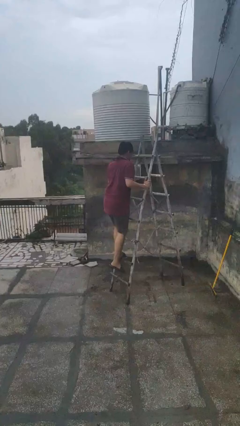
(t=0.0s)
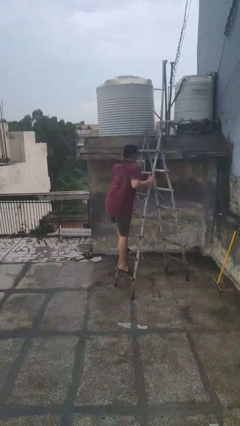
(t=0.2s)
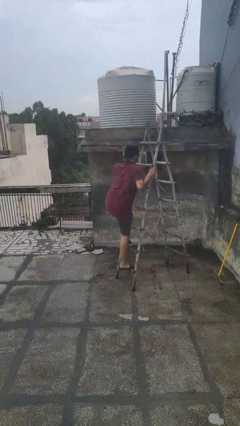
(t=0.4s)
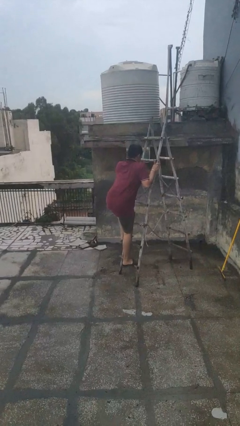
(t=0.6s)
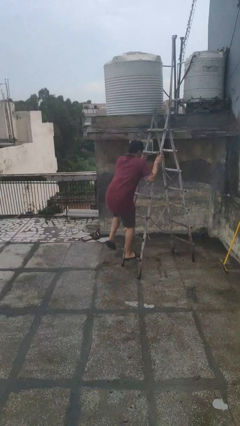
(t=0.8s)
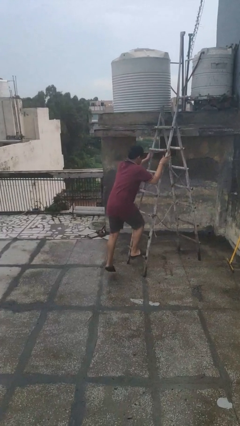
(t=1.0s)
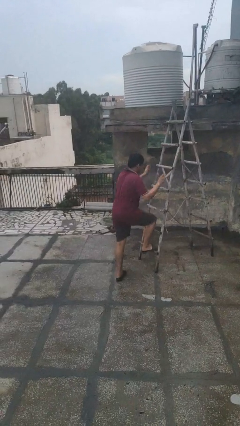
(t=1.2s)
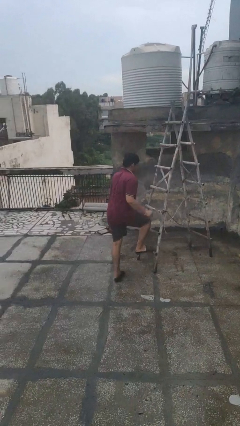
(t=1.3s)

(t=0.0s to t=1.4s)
person climbs down ladder

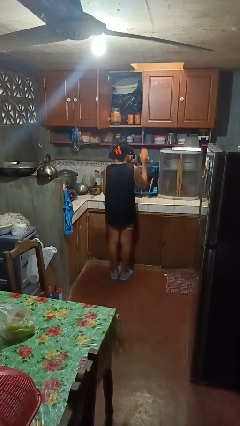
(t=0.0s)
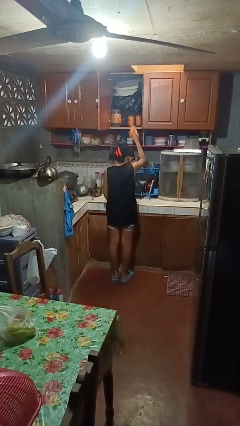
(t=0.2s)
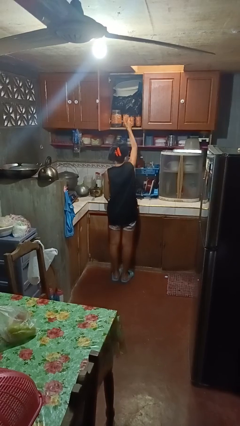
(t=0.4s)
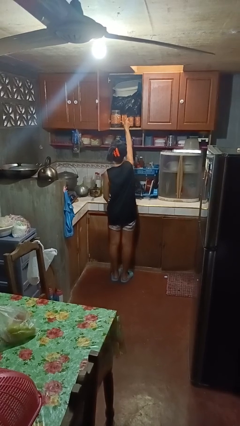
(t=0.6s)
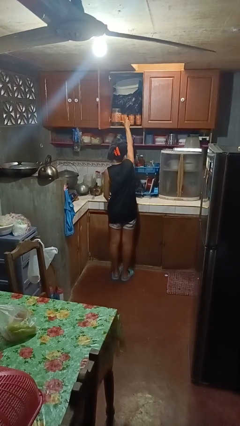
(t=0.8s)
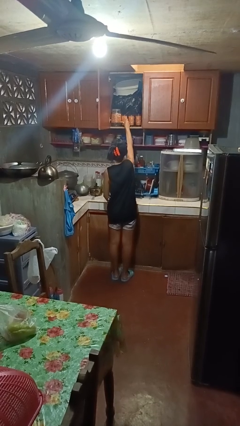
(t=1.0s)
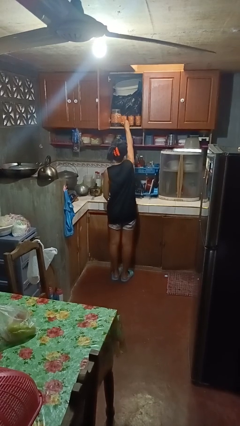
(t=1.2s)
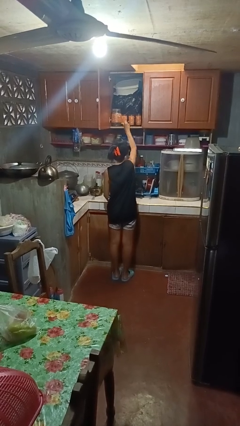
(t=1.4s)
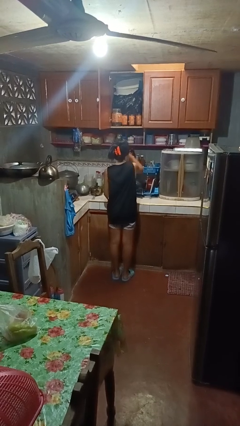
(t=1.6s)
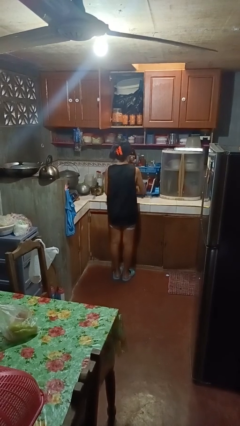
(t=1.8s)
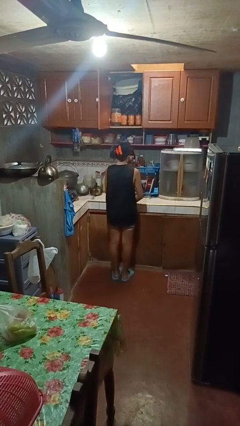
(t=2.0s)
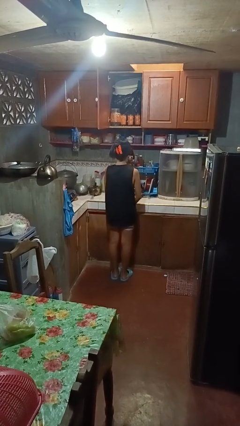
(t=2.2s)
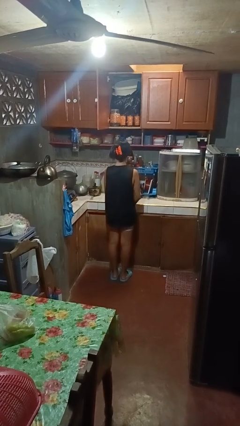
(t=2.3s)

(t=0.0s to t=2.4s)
person puts object in cabinet

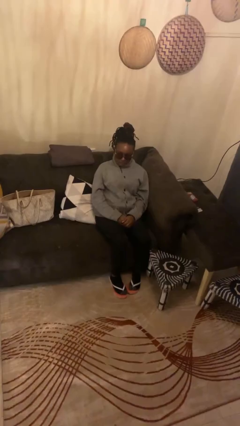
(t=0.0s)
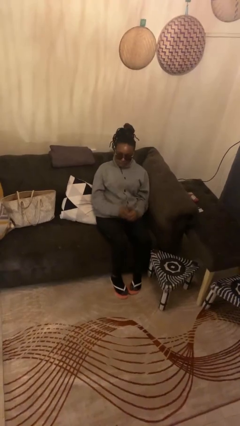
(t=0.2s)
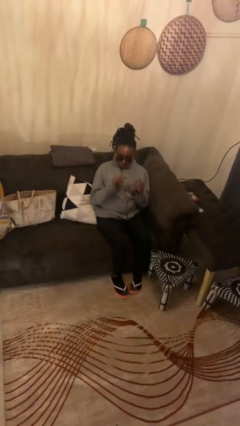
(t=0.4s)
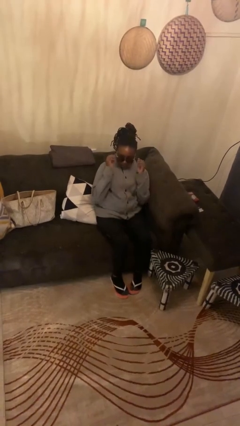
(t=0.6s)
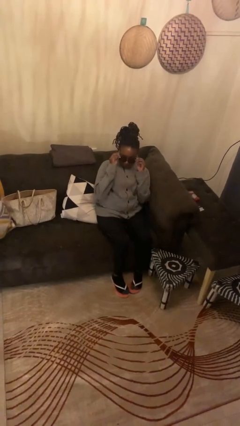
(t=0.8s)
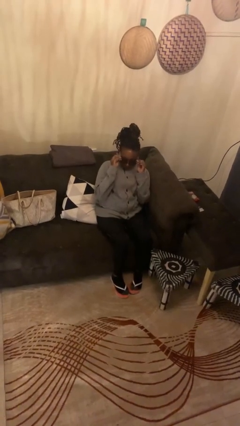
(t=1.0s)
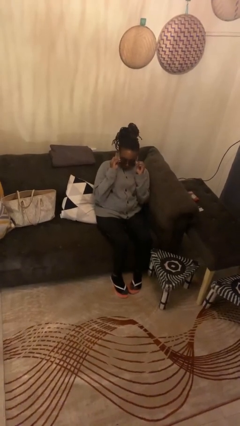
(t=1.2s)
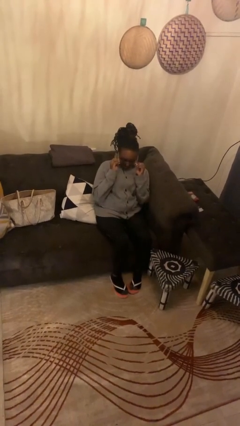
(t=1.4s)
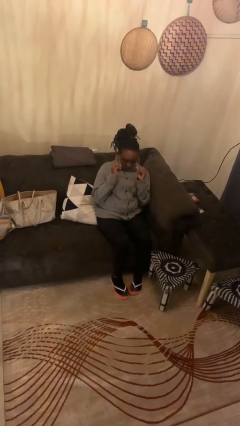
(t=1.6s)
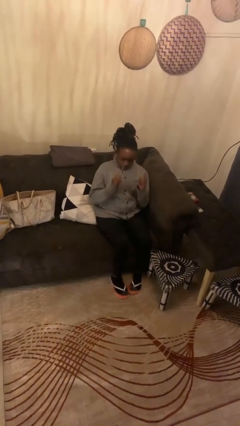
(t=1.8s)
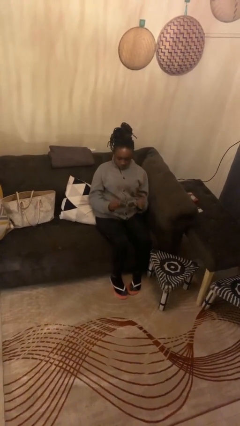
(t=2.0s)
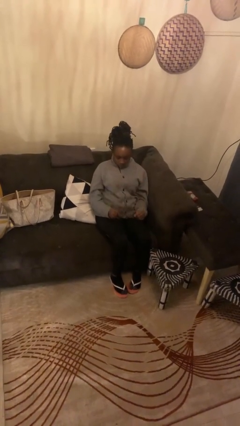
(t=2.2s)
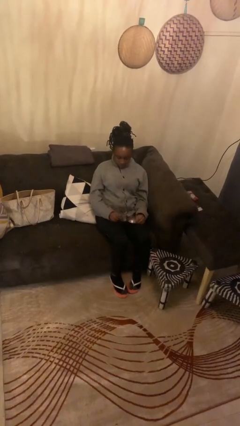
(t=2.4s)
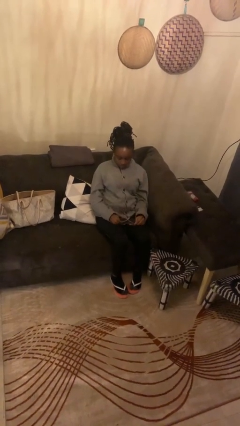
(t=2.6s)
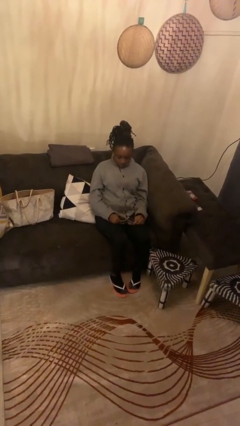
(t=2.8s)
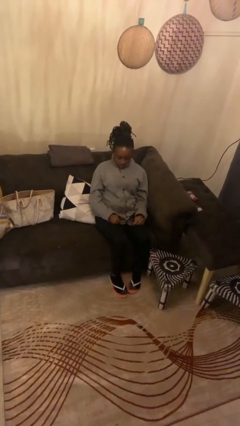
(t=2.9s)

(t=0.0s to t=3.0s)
person takes off sunglasses

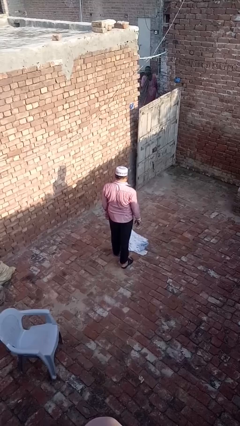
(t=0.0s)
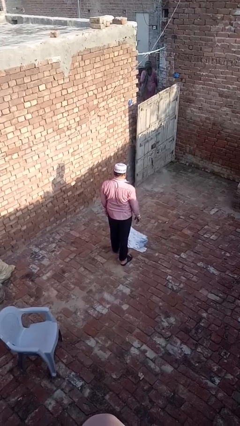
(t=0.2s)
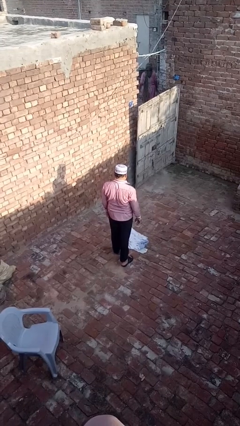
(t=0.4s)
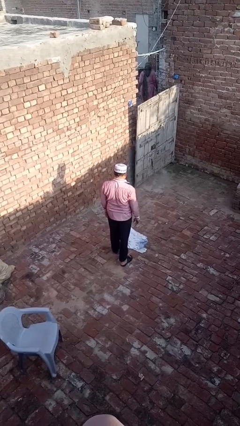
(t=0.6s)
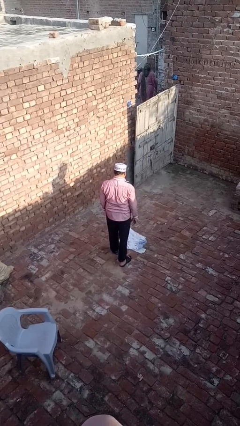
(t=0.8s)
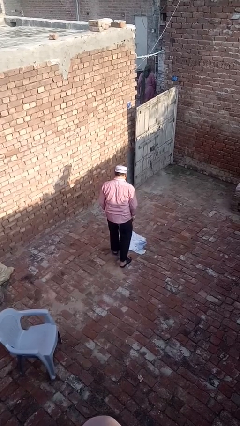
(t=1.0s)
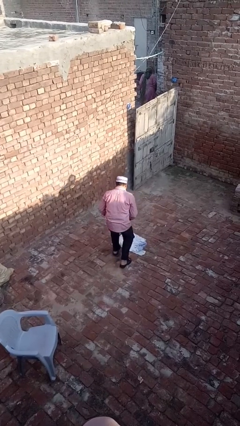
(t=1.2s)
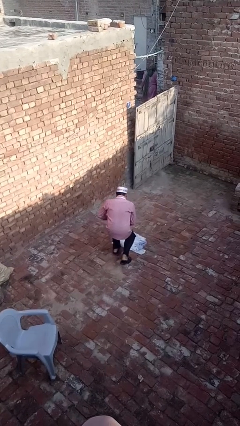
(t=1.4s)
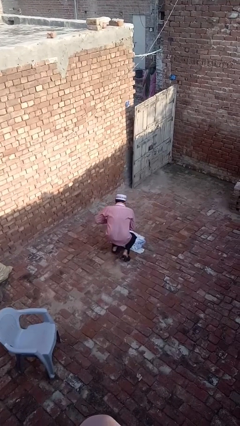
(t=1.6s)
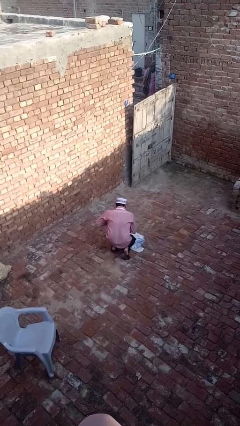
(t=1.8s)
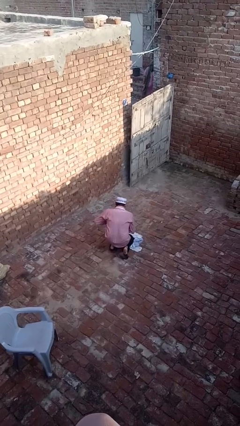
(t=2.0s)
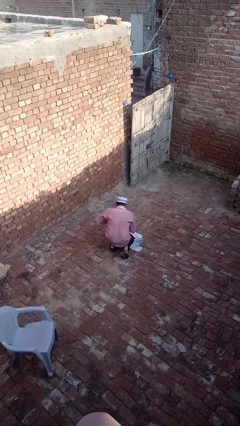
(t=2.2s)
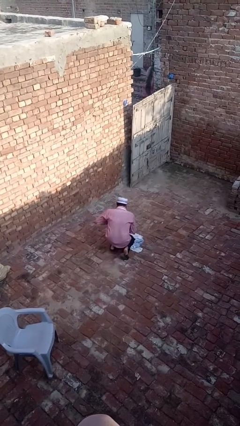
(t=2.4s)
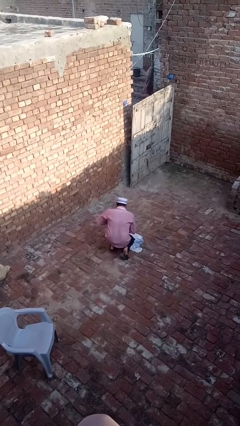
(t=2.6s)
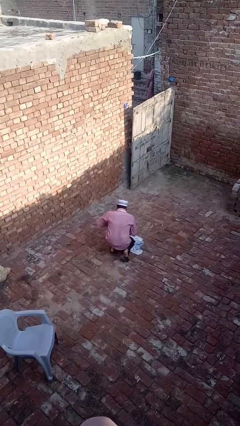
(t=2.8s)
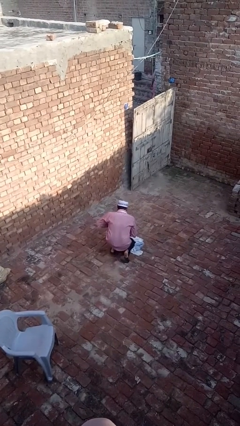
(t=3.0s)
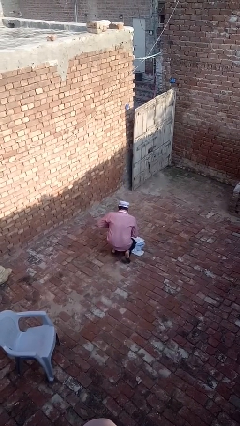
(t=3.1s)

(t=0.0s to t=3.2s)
person kneels

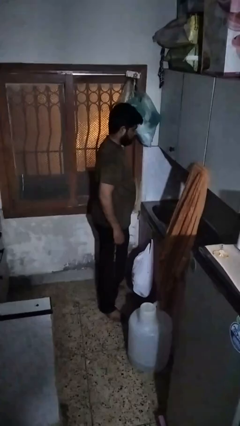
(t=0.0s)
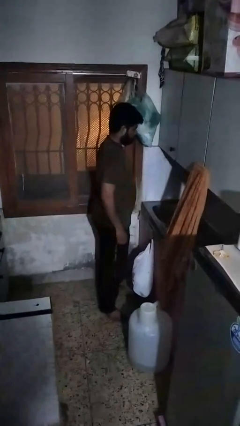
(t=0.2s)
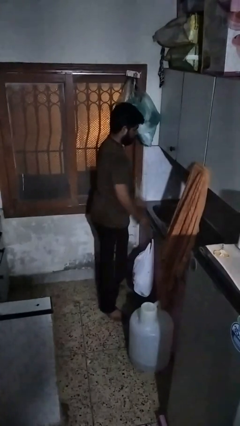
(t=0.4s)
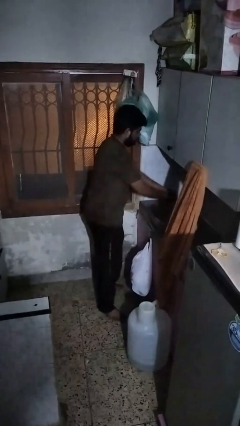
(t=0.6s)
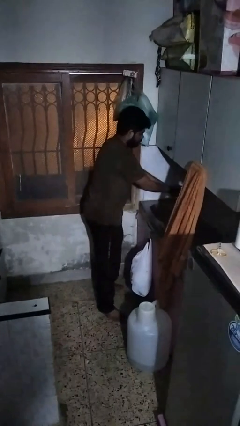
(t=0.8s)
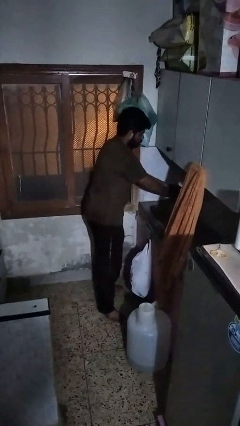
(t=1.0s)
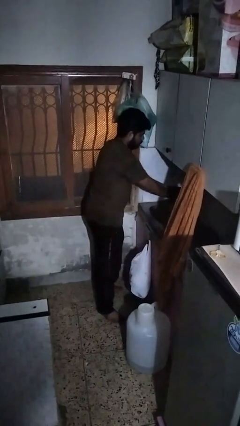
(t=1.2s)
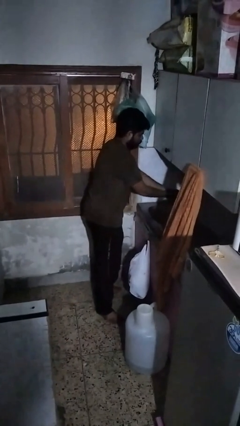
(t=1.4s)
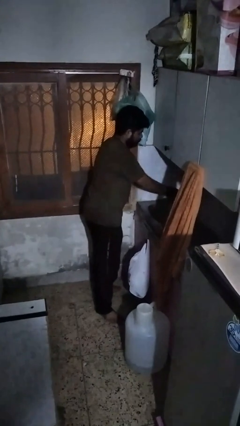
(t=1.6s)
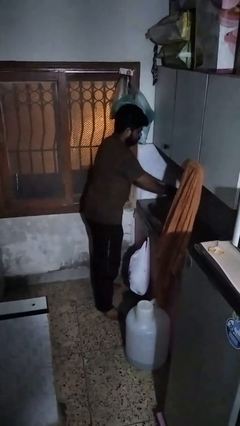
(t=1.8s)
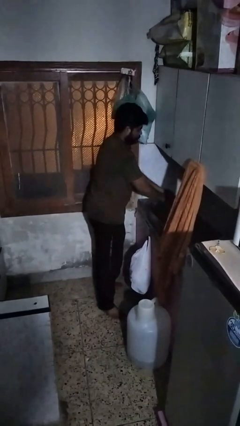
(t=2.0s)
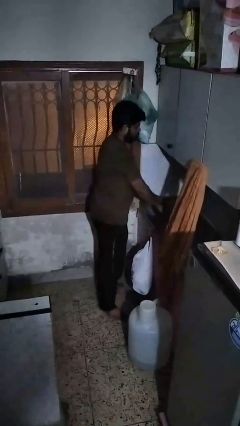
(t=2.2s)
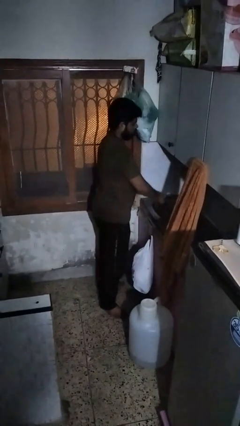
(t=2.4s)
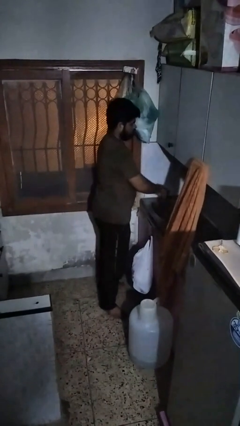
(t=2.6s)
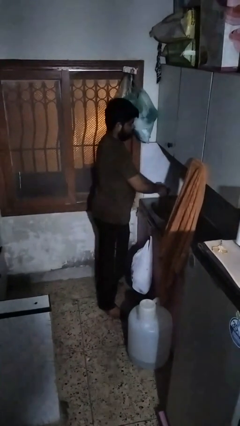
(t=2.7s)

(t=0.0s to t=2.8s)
person washes hands

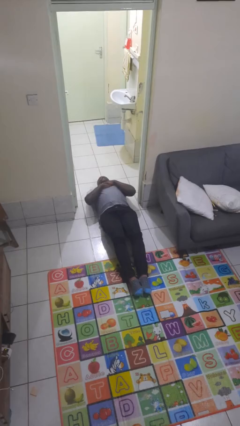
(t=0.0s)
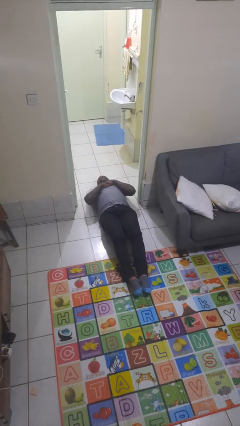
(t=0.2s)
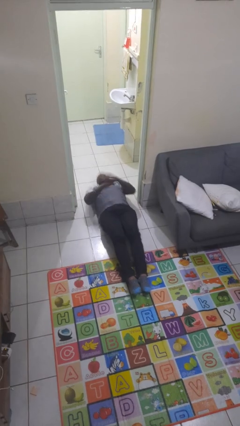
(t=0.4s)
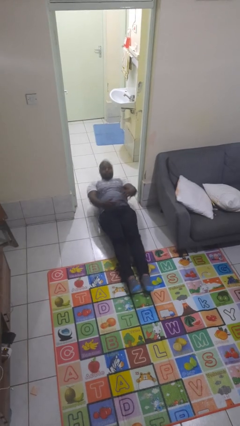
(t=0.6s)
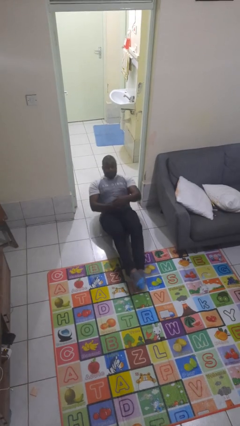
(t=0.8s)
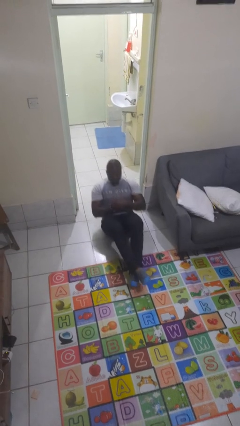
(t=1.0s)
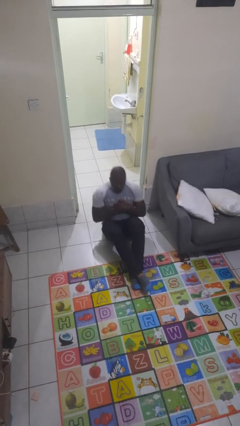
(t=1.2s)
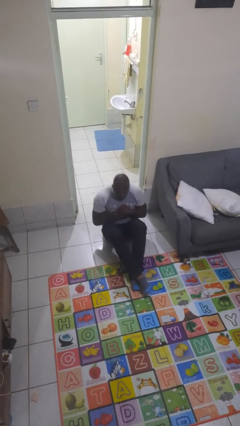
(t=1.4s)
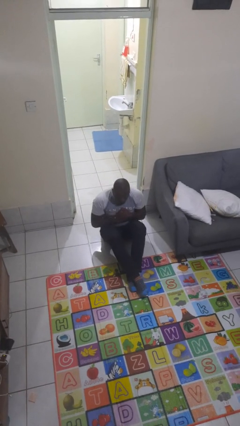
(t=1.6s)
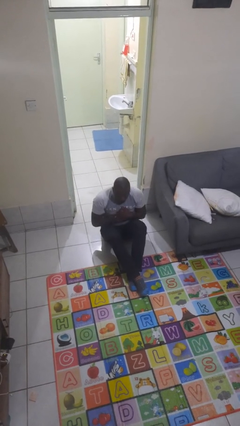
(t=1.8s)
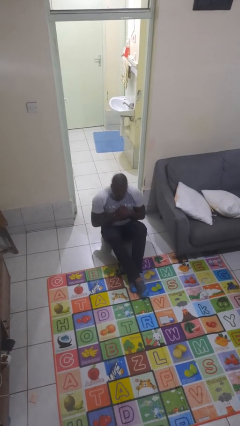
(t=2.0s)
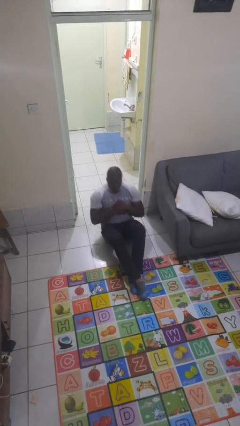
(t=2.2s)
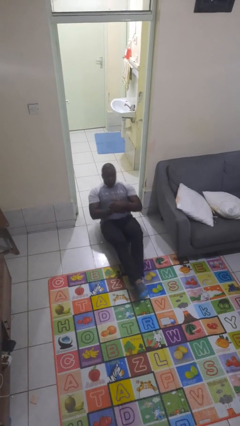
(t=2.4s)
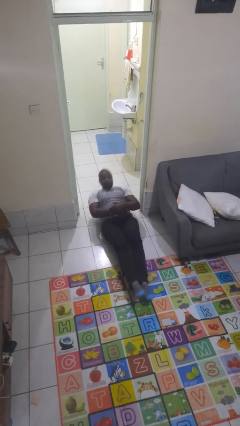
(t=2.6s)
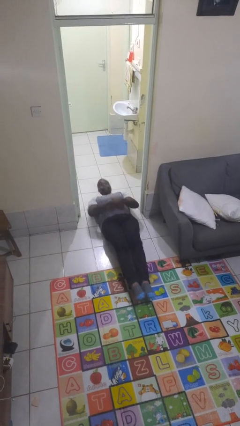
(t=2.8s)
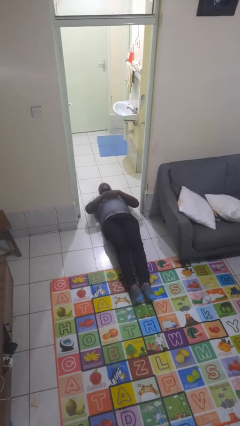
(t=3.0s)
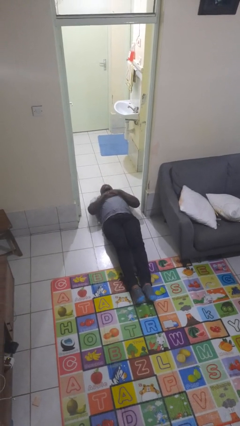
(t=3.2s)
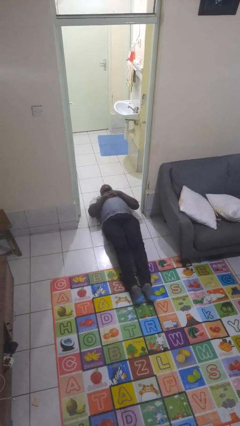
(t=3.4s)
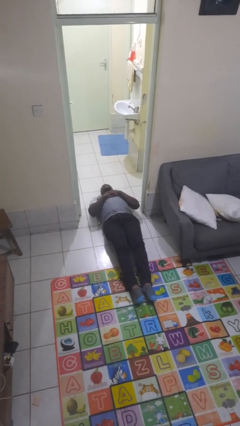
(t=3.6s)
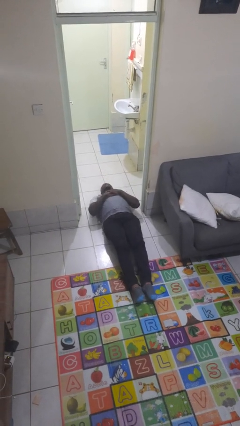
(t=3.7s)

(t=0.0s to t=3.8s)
person exercises with situp

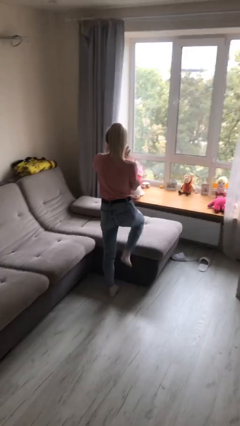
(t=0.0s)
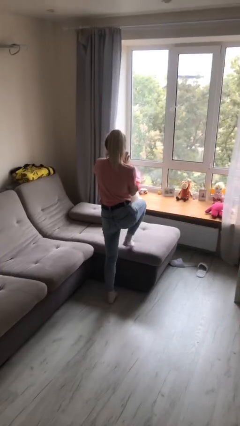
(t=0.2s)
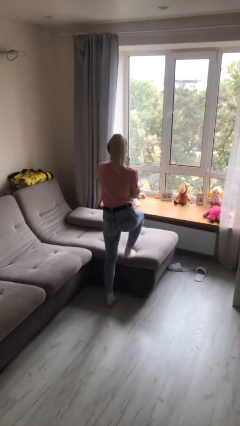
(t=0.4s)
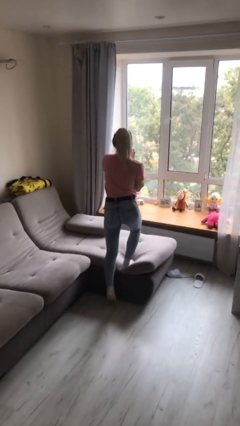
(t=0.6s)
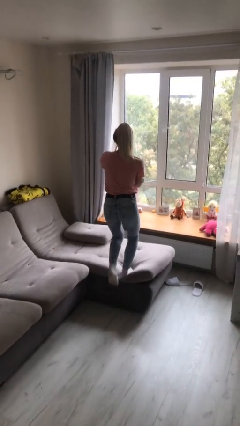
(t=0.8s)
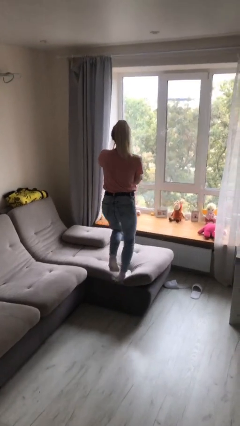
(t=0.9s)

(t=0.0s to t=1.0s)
person climbs on couch
